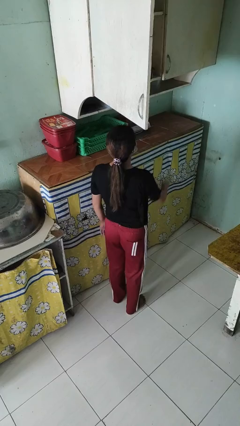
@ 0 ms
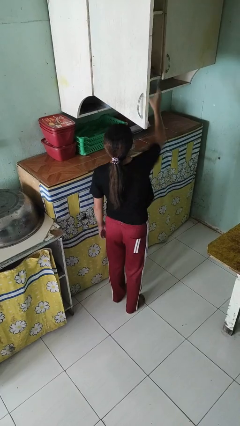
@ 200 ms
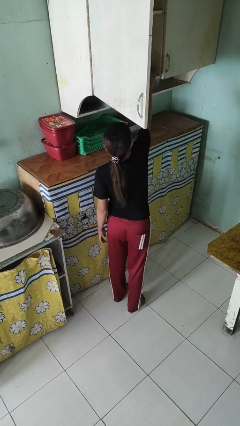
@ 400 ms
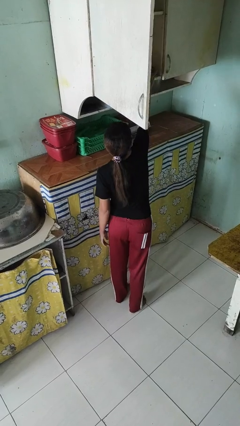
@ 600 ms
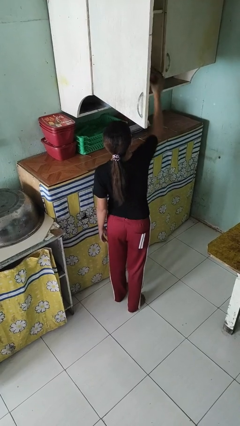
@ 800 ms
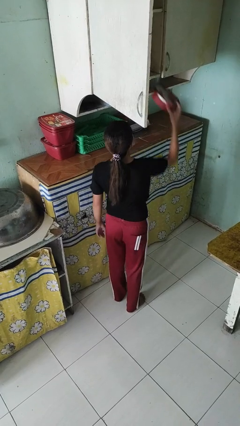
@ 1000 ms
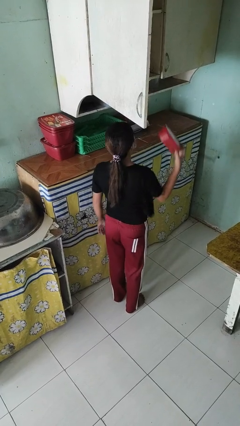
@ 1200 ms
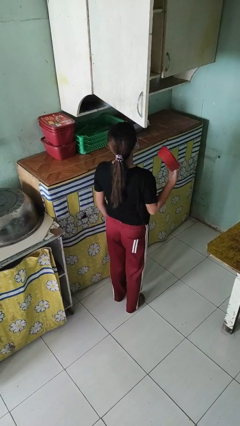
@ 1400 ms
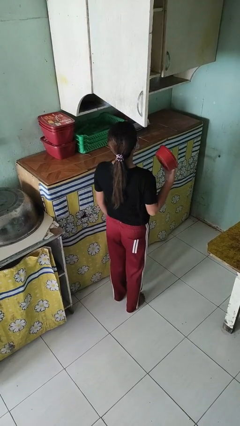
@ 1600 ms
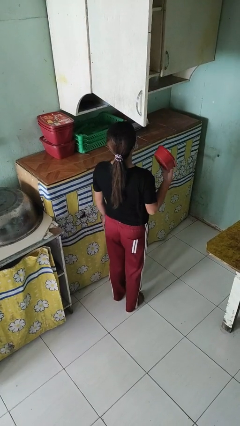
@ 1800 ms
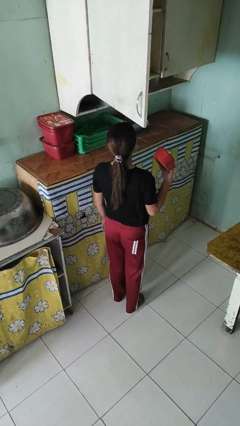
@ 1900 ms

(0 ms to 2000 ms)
person takes object from cabinet

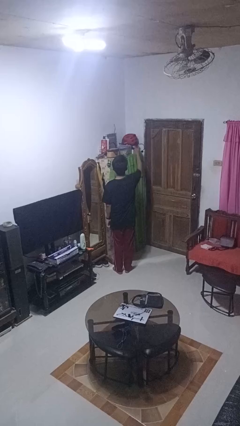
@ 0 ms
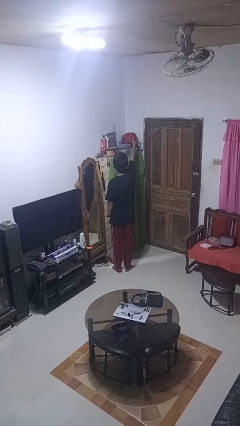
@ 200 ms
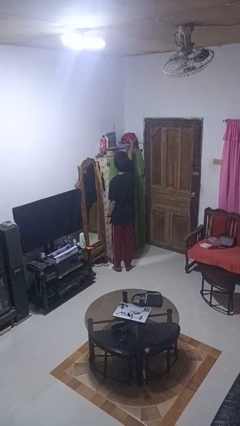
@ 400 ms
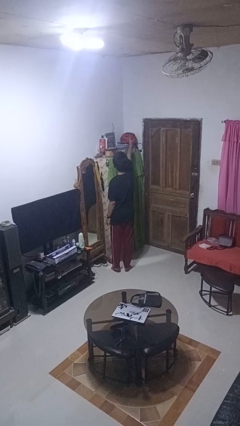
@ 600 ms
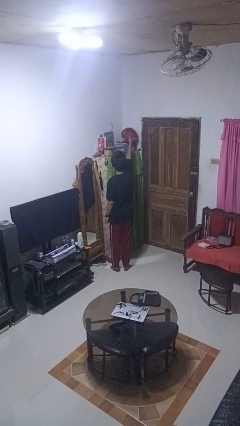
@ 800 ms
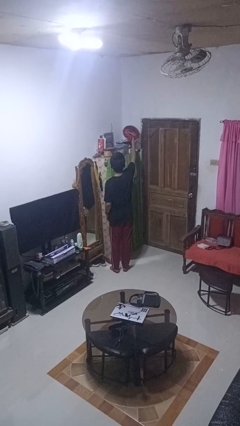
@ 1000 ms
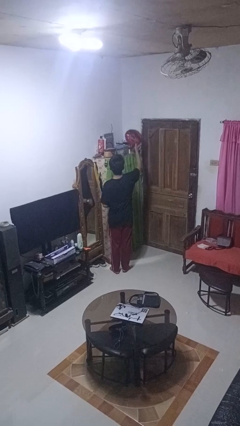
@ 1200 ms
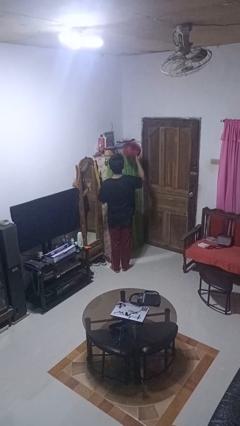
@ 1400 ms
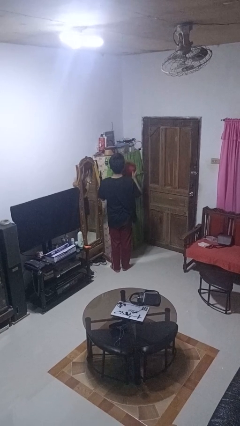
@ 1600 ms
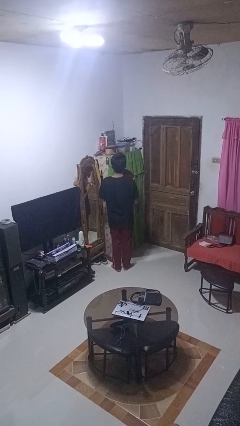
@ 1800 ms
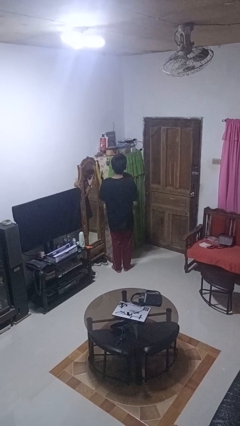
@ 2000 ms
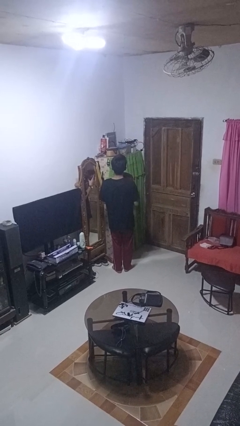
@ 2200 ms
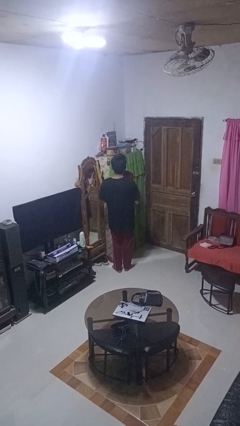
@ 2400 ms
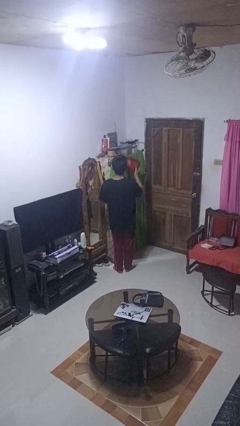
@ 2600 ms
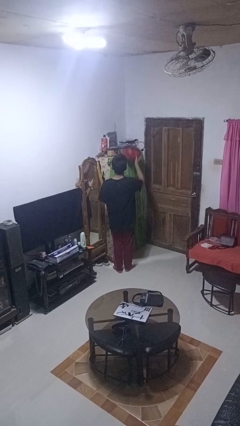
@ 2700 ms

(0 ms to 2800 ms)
person picks up object from shelf

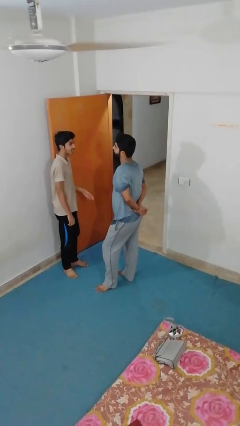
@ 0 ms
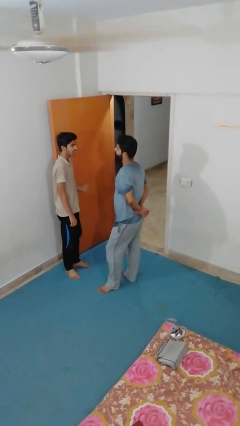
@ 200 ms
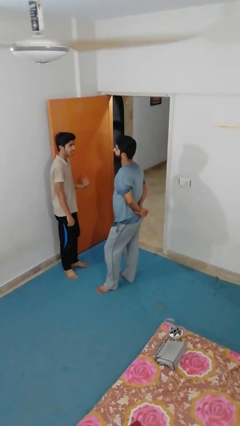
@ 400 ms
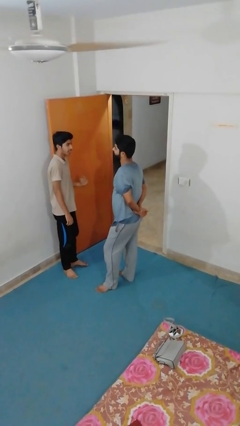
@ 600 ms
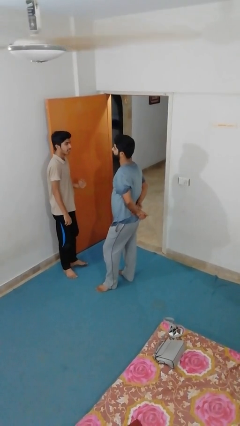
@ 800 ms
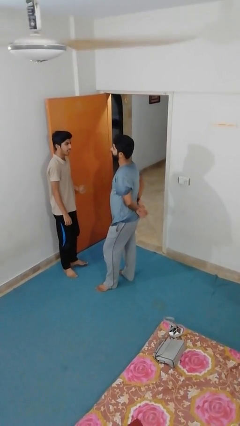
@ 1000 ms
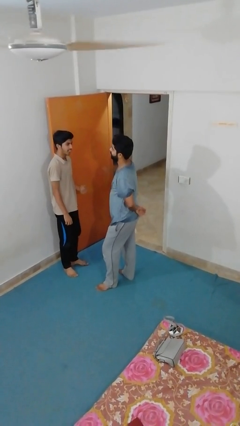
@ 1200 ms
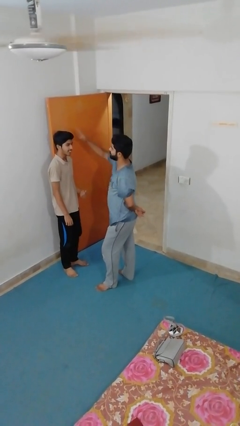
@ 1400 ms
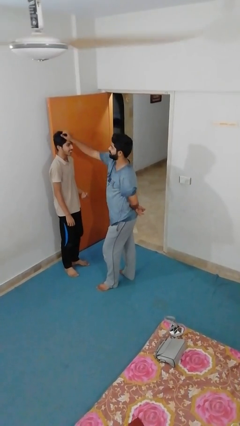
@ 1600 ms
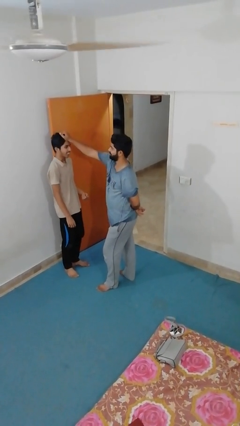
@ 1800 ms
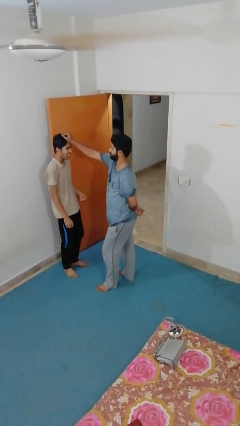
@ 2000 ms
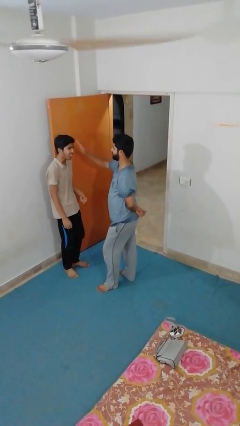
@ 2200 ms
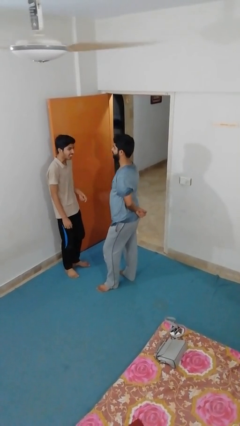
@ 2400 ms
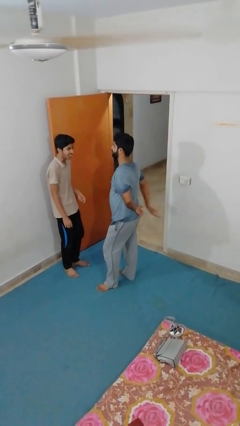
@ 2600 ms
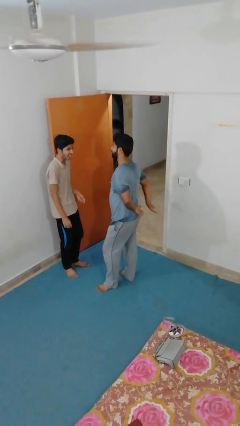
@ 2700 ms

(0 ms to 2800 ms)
person grabs person by hair

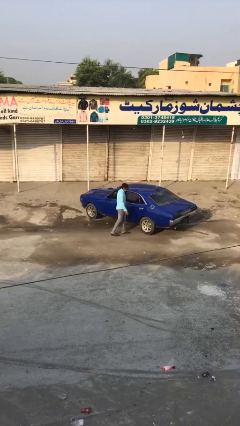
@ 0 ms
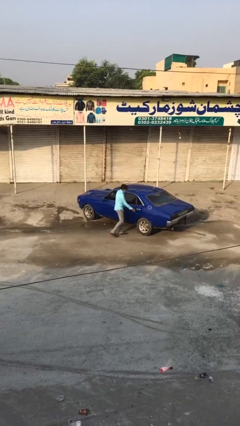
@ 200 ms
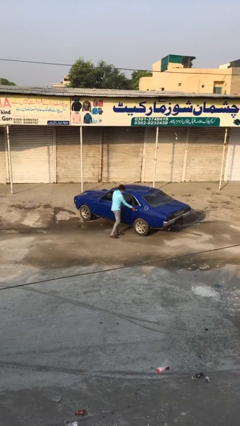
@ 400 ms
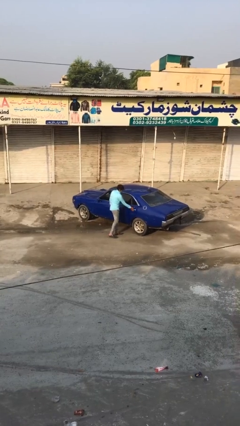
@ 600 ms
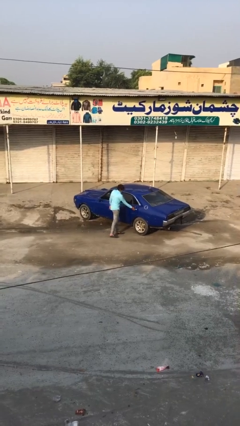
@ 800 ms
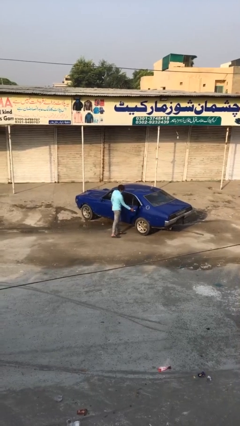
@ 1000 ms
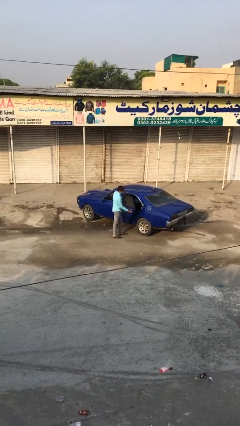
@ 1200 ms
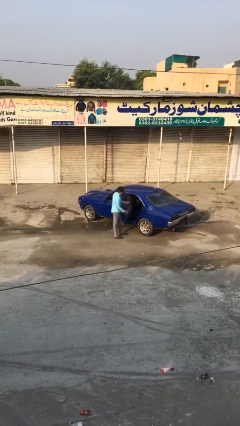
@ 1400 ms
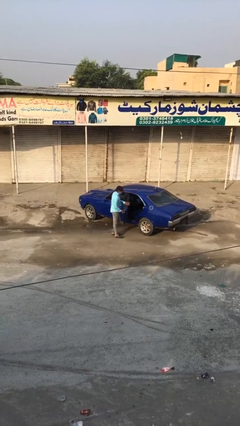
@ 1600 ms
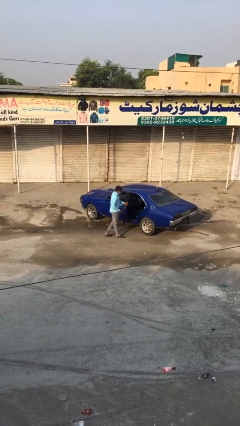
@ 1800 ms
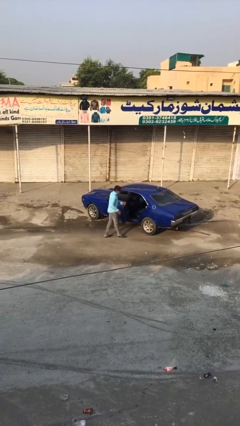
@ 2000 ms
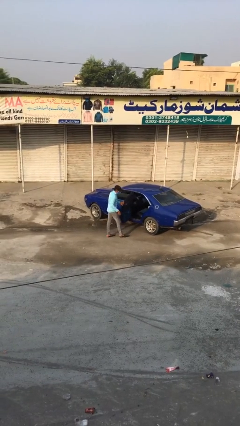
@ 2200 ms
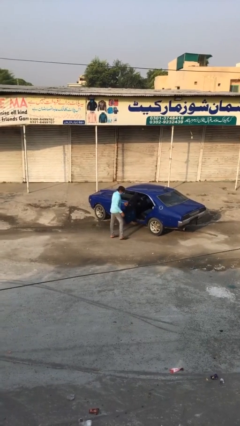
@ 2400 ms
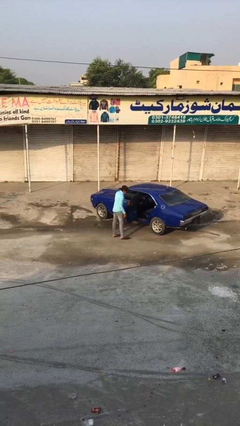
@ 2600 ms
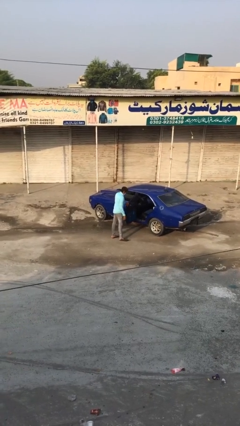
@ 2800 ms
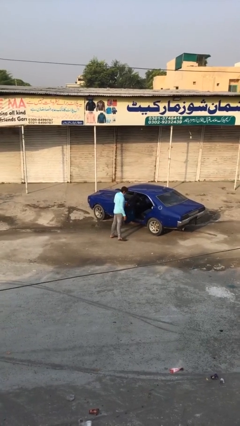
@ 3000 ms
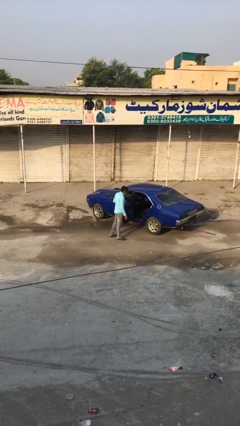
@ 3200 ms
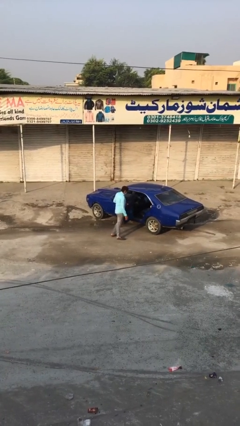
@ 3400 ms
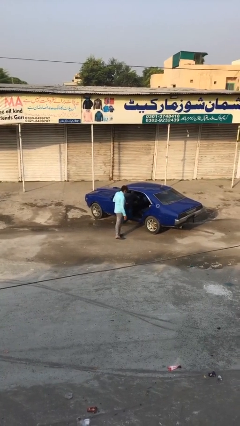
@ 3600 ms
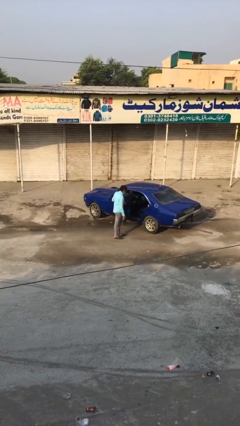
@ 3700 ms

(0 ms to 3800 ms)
person opens car door

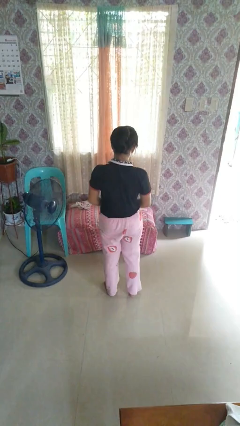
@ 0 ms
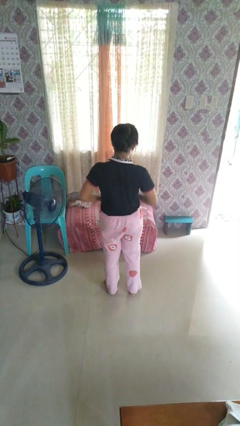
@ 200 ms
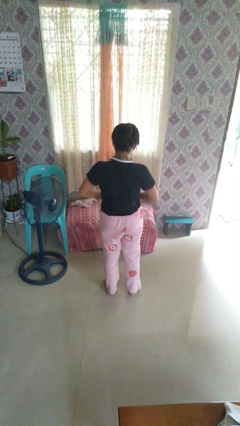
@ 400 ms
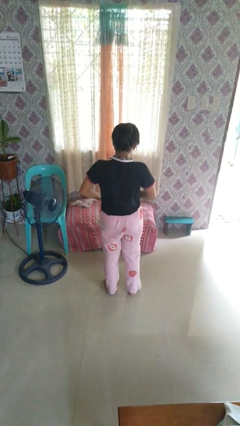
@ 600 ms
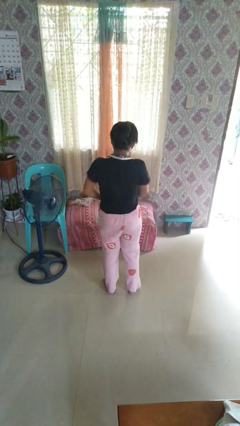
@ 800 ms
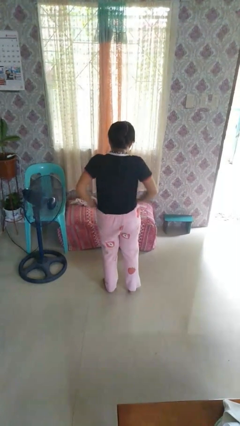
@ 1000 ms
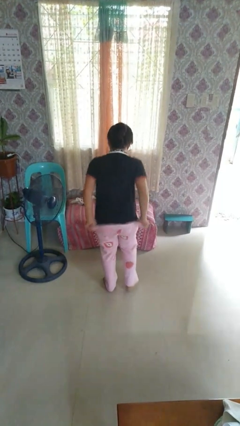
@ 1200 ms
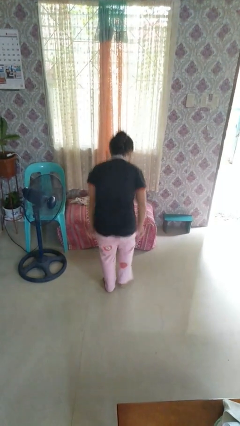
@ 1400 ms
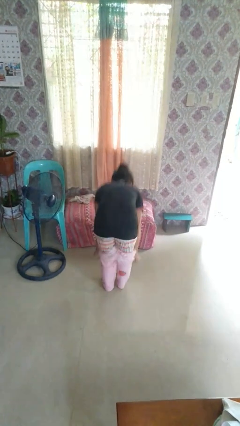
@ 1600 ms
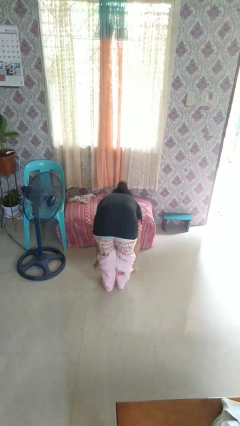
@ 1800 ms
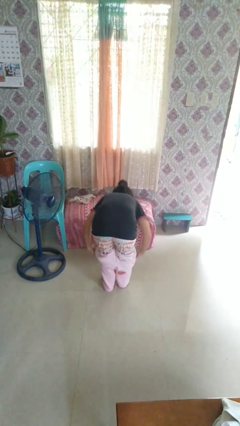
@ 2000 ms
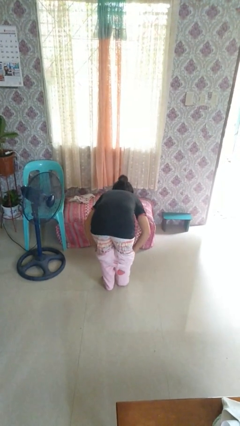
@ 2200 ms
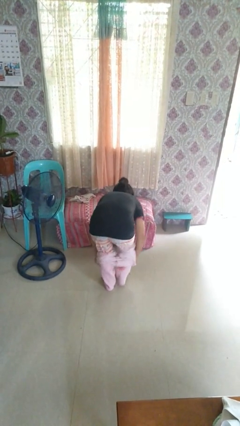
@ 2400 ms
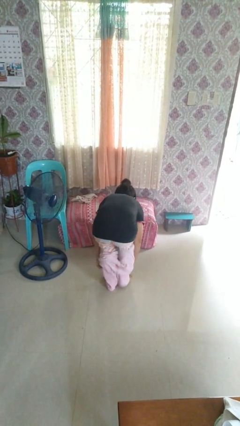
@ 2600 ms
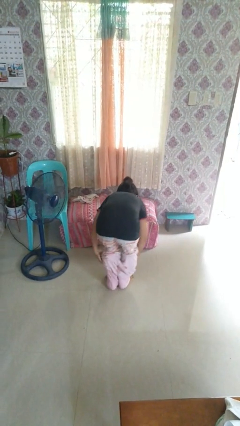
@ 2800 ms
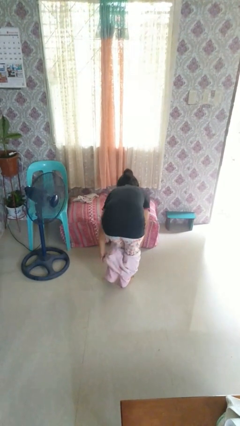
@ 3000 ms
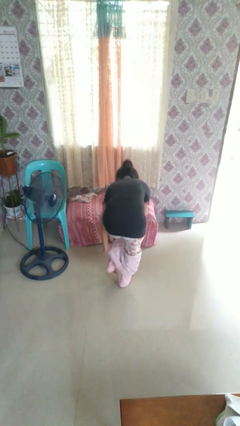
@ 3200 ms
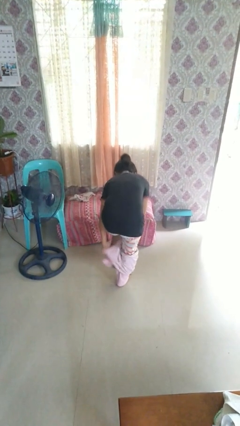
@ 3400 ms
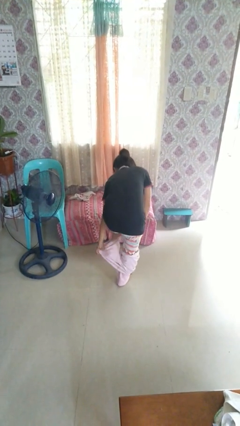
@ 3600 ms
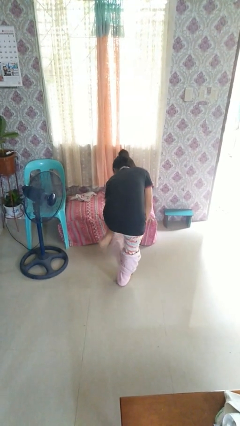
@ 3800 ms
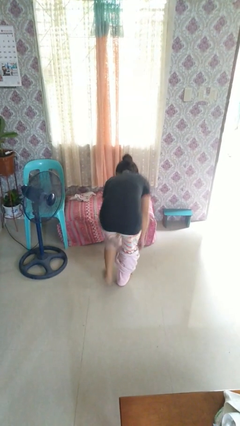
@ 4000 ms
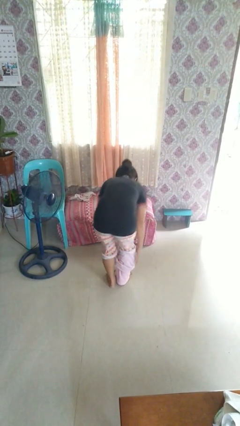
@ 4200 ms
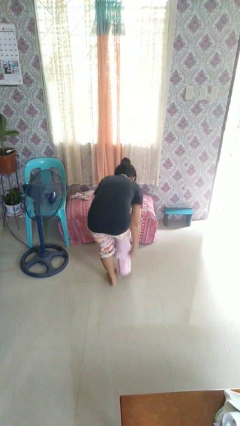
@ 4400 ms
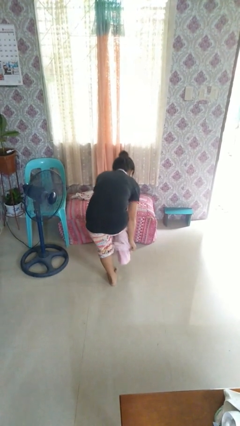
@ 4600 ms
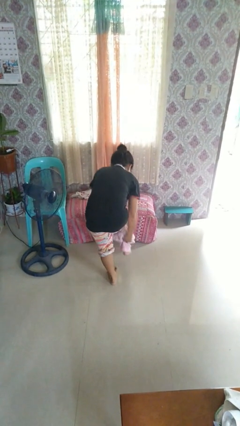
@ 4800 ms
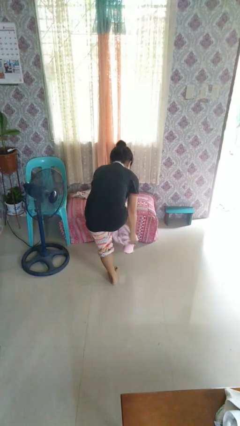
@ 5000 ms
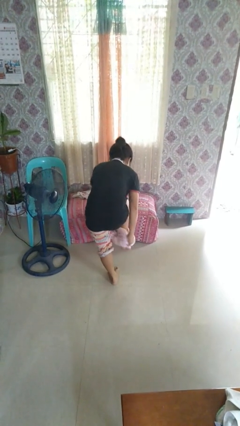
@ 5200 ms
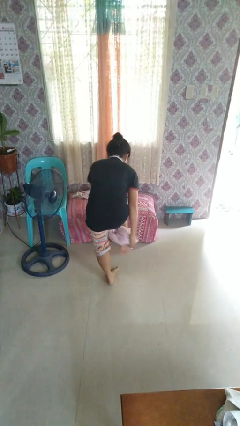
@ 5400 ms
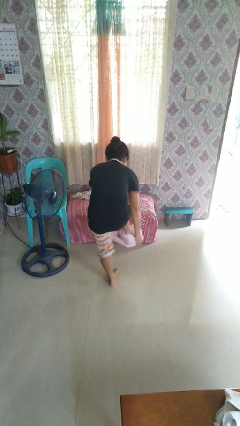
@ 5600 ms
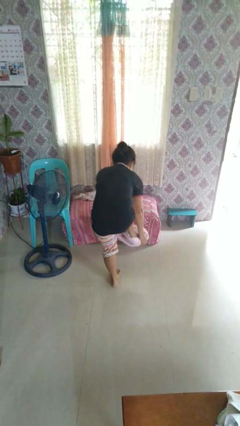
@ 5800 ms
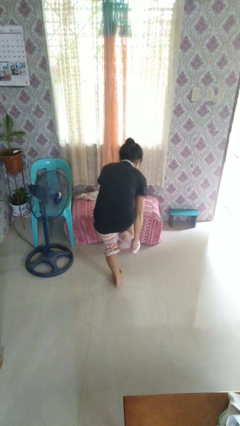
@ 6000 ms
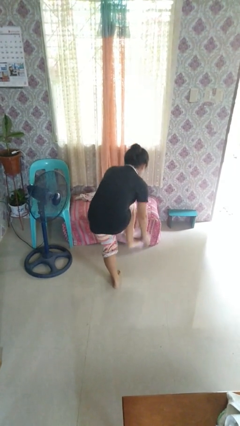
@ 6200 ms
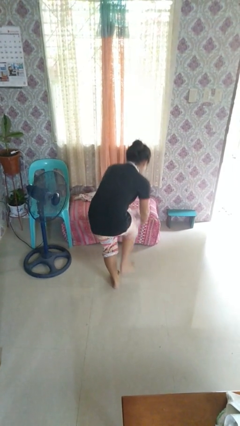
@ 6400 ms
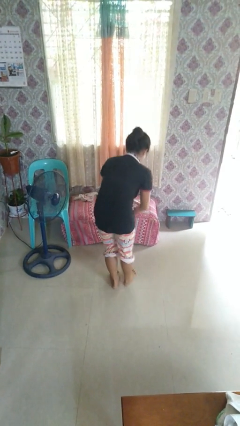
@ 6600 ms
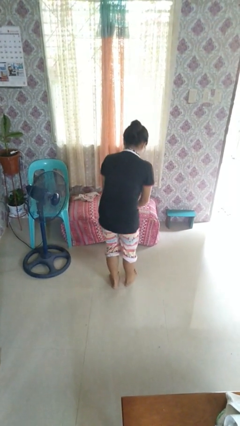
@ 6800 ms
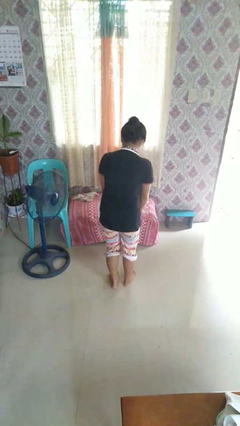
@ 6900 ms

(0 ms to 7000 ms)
person takes off pants
